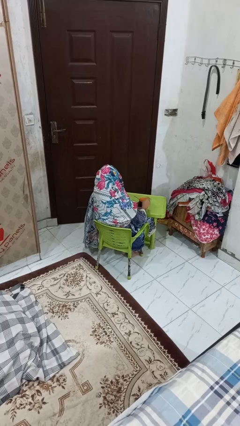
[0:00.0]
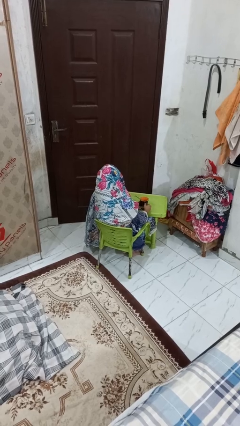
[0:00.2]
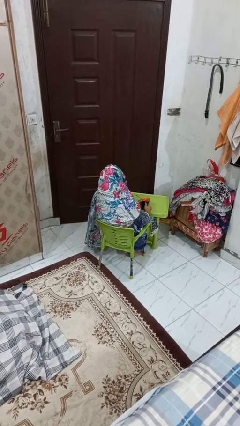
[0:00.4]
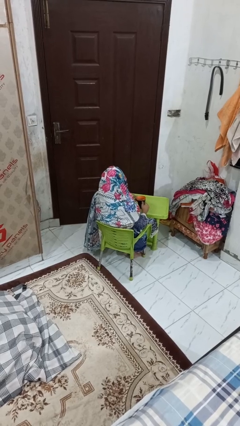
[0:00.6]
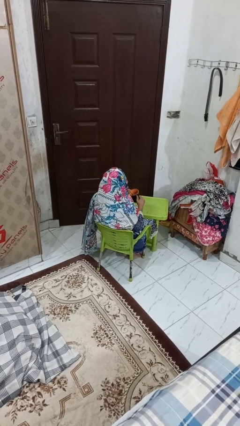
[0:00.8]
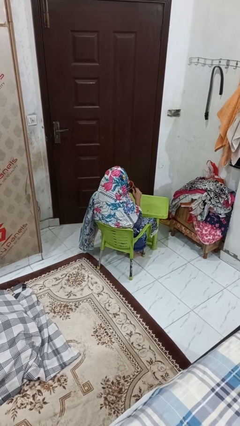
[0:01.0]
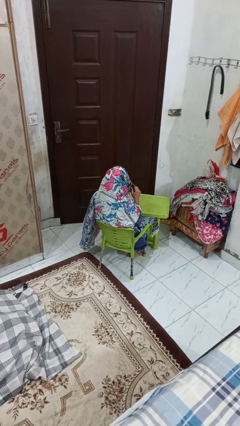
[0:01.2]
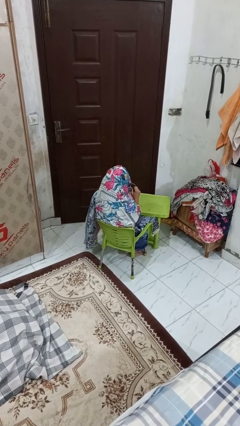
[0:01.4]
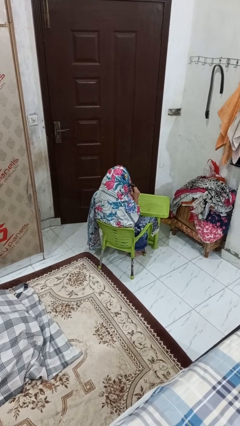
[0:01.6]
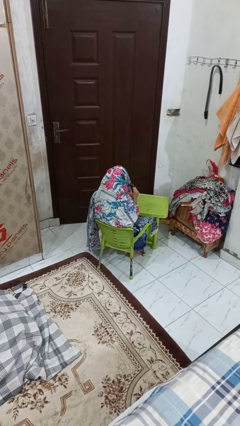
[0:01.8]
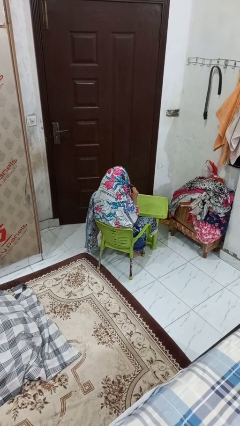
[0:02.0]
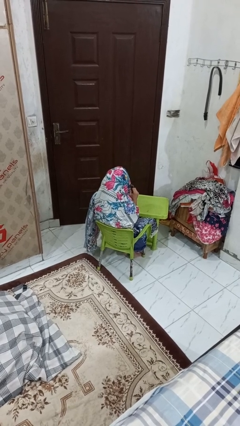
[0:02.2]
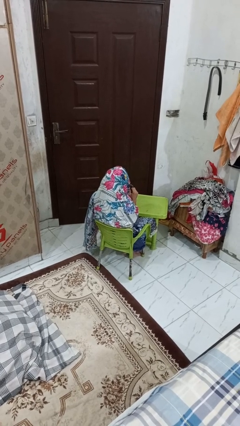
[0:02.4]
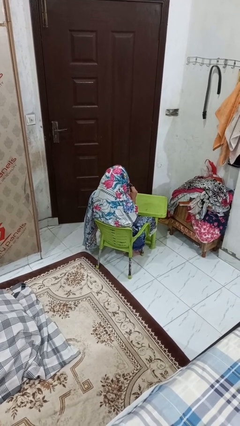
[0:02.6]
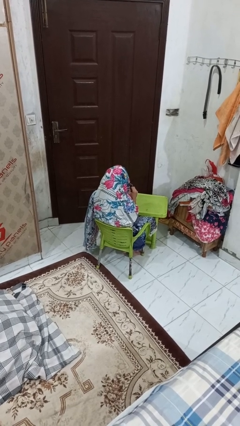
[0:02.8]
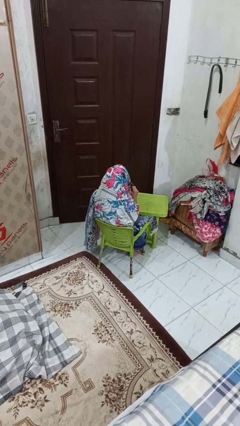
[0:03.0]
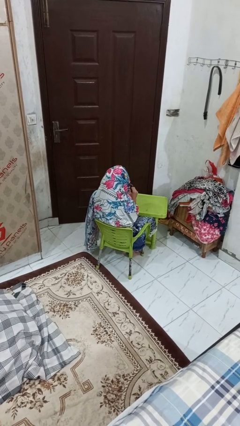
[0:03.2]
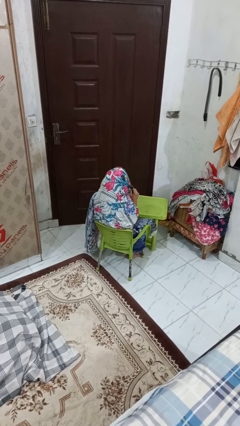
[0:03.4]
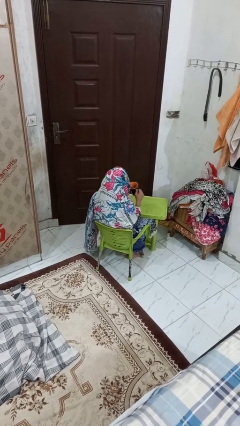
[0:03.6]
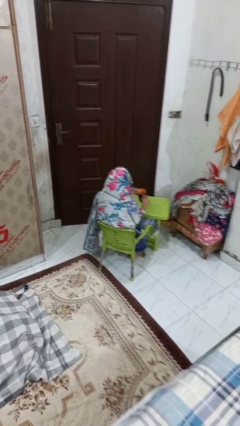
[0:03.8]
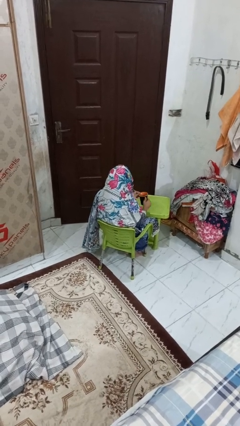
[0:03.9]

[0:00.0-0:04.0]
person drinks from mug

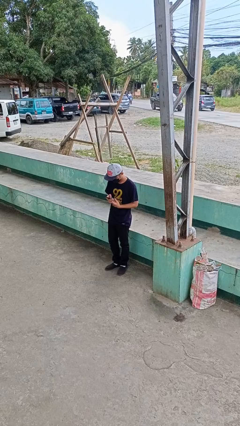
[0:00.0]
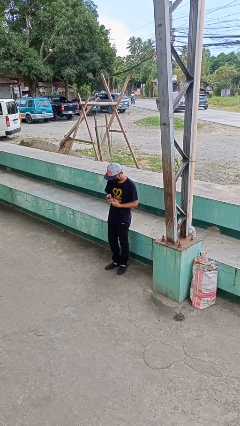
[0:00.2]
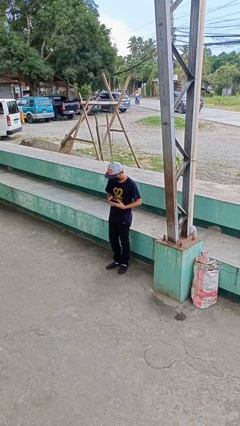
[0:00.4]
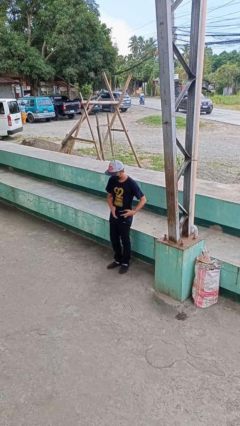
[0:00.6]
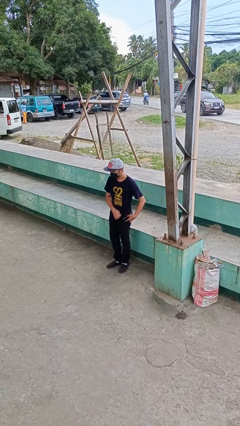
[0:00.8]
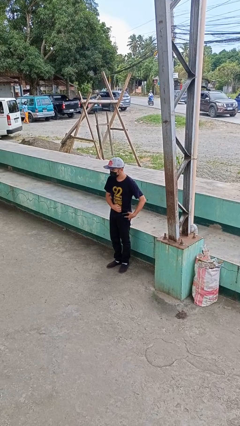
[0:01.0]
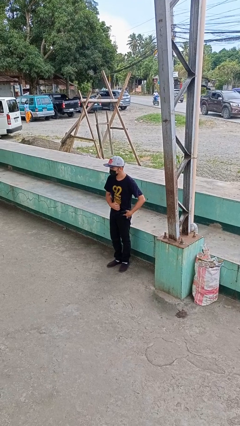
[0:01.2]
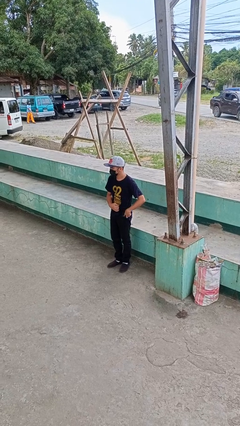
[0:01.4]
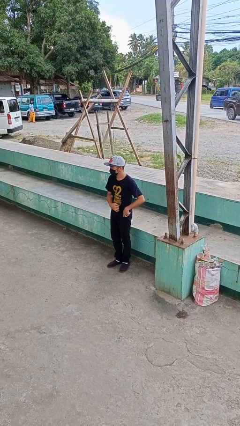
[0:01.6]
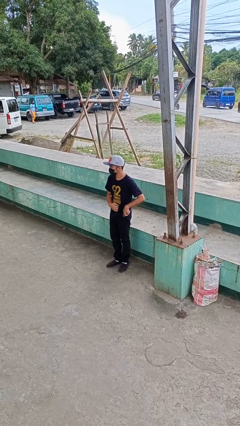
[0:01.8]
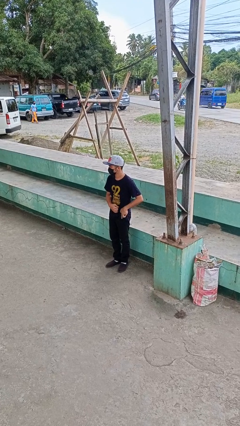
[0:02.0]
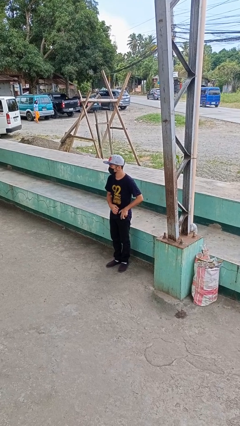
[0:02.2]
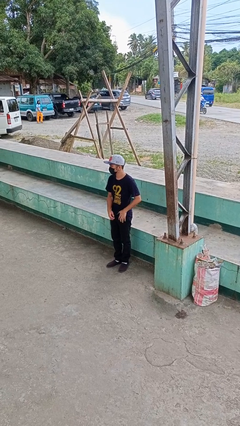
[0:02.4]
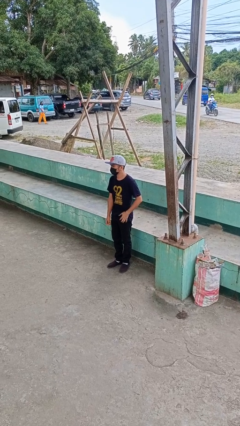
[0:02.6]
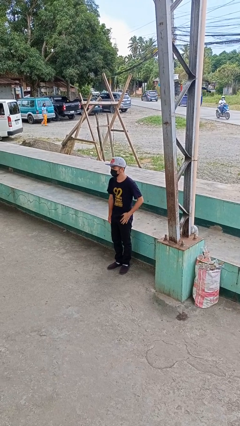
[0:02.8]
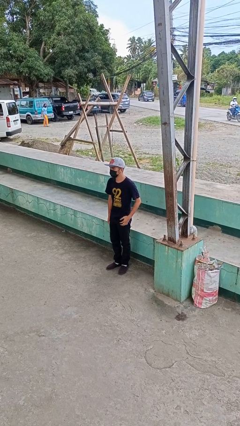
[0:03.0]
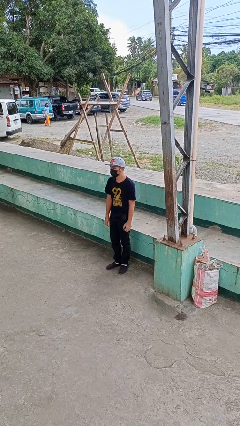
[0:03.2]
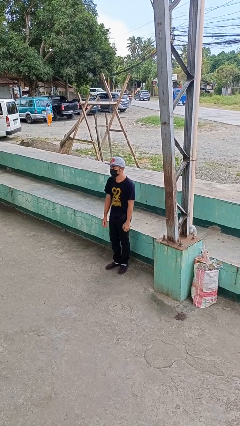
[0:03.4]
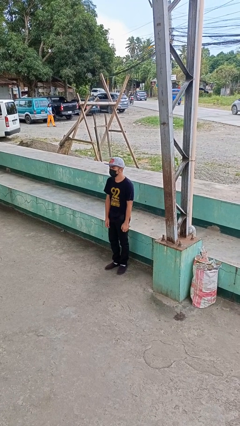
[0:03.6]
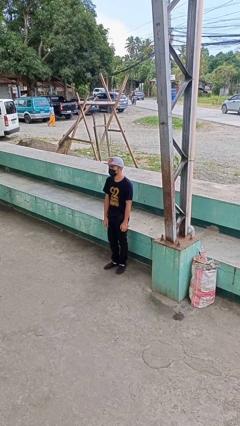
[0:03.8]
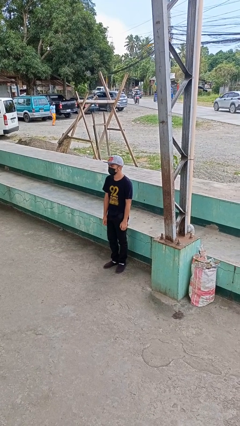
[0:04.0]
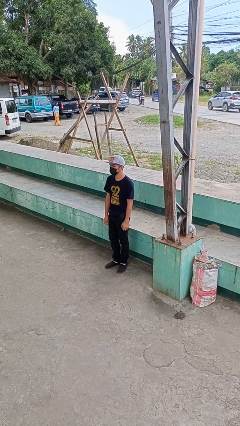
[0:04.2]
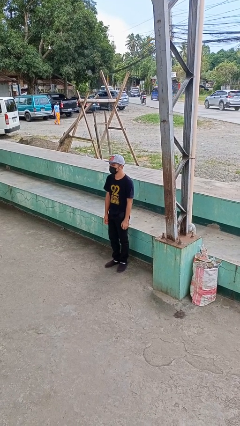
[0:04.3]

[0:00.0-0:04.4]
person puts phone into pocket

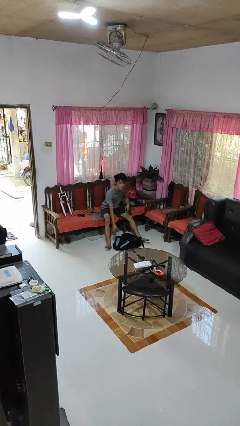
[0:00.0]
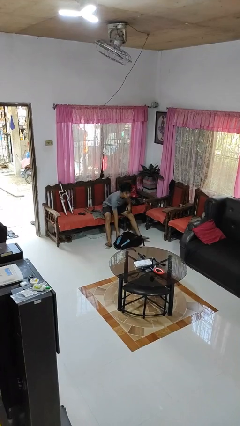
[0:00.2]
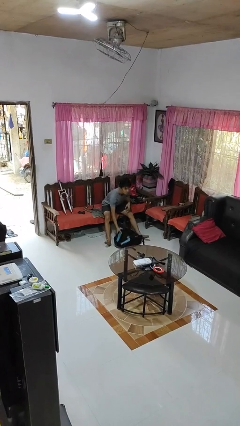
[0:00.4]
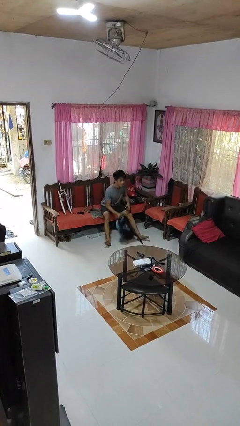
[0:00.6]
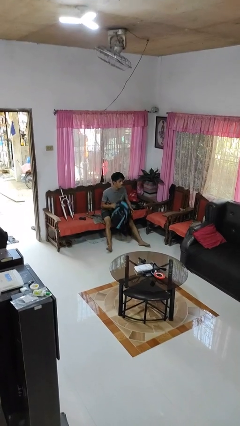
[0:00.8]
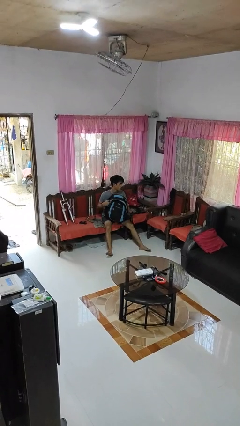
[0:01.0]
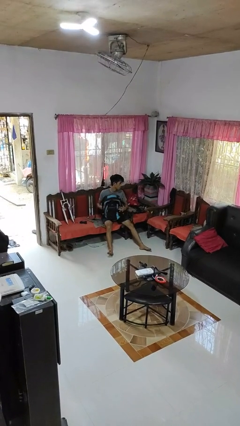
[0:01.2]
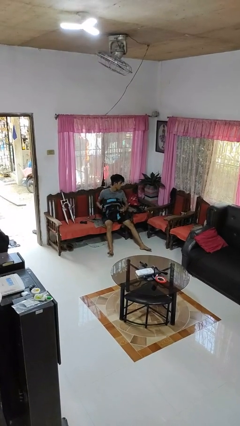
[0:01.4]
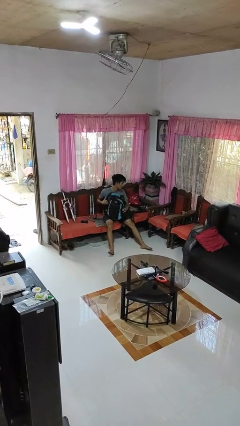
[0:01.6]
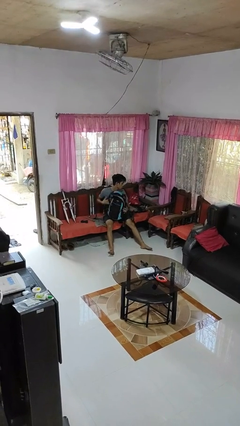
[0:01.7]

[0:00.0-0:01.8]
person picks up object from floor

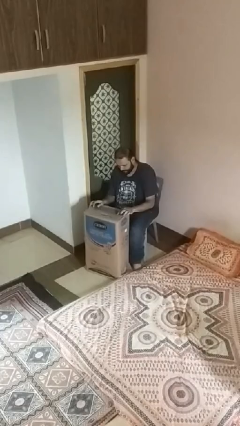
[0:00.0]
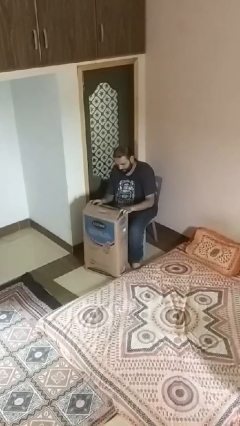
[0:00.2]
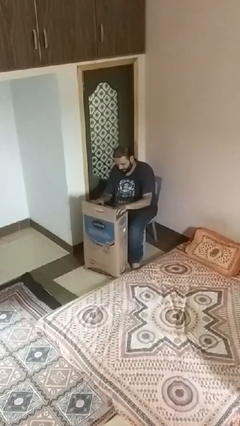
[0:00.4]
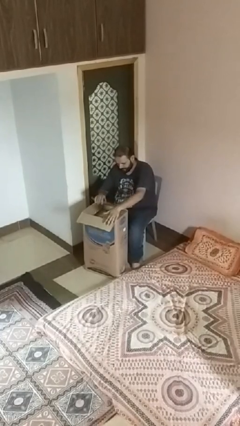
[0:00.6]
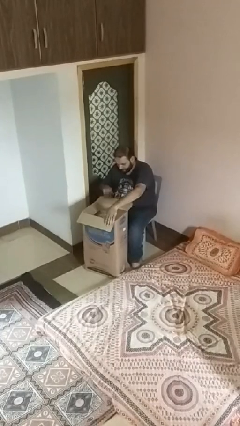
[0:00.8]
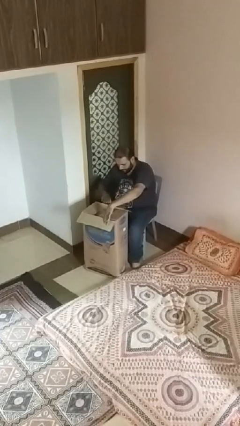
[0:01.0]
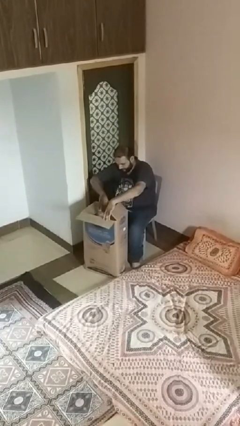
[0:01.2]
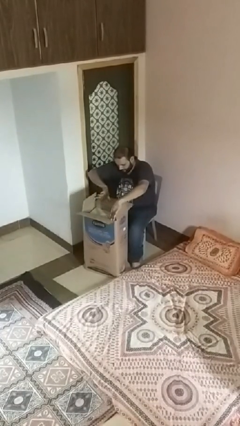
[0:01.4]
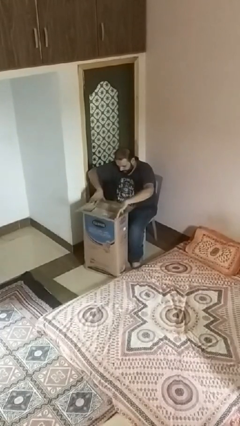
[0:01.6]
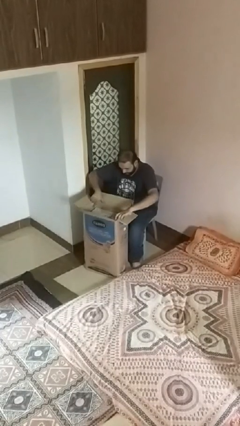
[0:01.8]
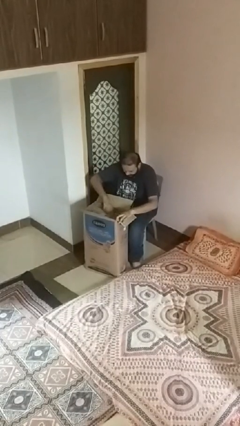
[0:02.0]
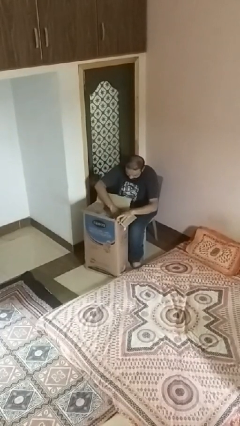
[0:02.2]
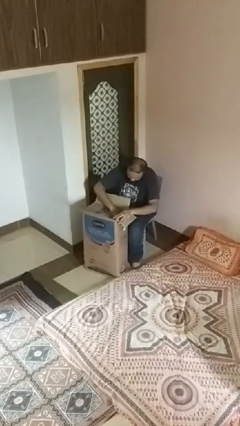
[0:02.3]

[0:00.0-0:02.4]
person searches in box

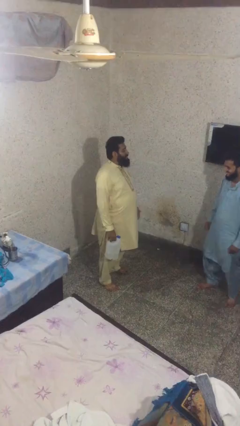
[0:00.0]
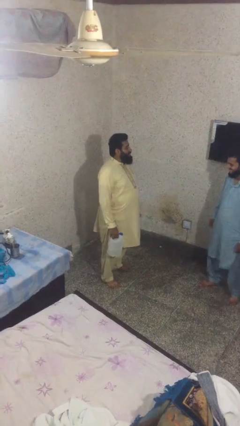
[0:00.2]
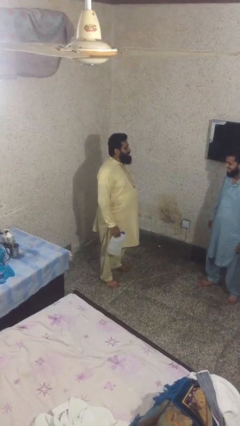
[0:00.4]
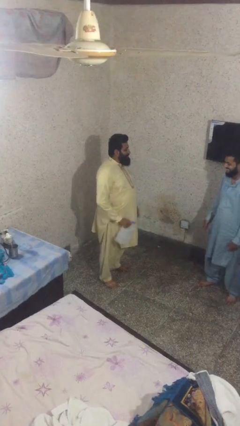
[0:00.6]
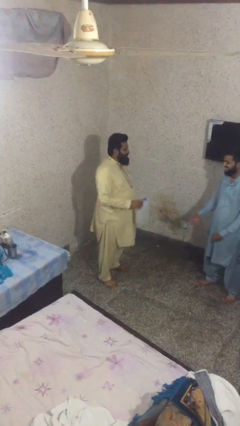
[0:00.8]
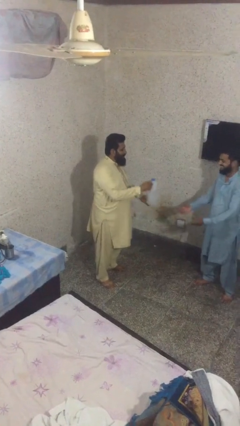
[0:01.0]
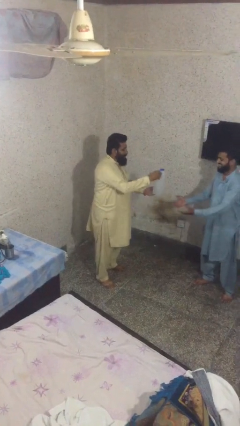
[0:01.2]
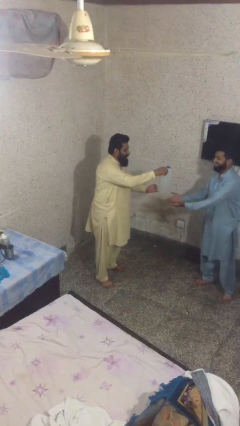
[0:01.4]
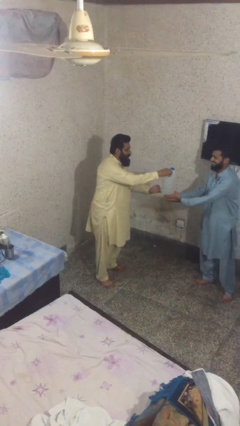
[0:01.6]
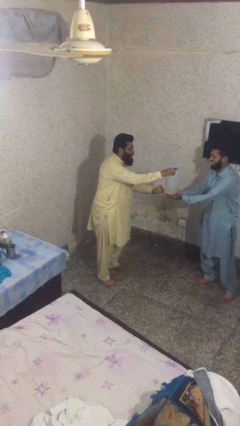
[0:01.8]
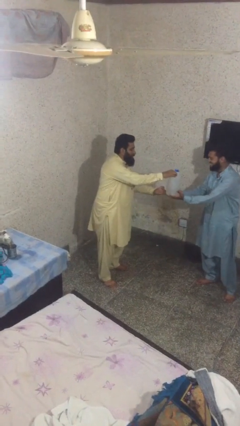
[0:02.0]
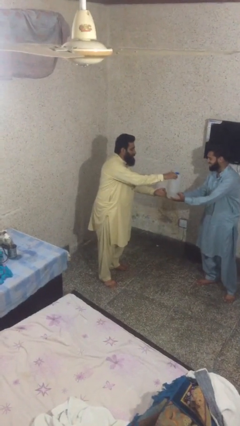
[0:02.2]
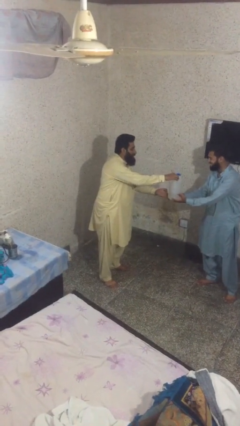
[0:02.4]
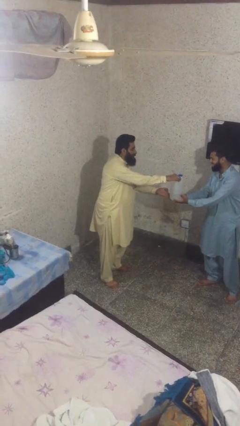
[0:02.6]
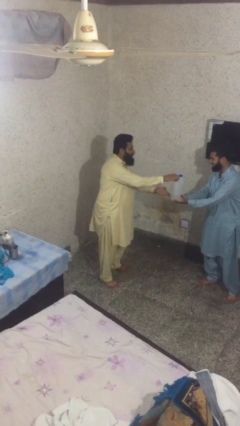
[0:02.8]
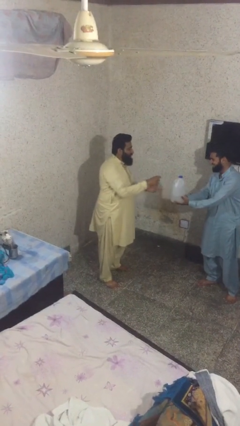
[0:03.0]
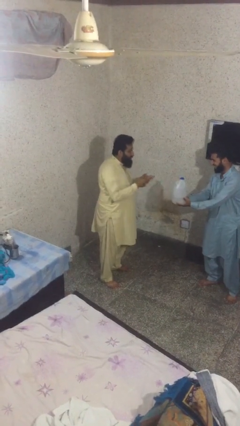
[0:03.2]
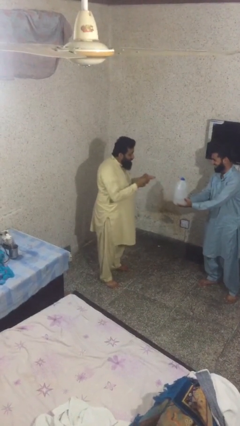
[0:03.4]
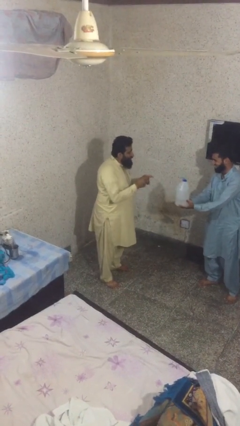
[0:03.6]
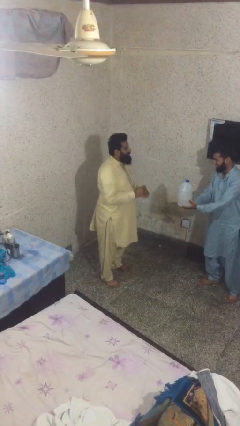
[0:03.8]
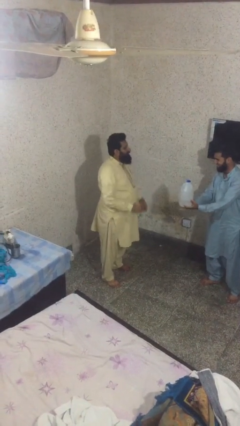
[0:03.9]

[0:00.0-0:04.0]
person transfers object to person

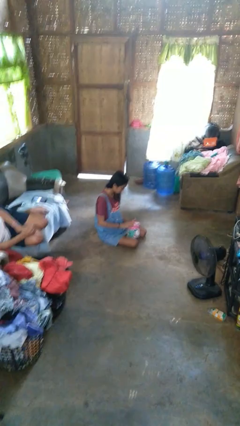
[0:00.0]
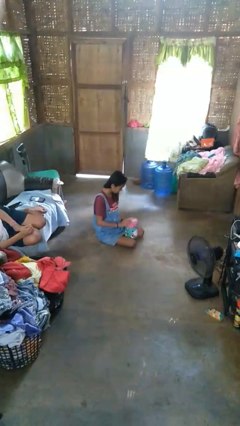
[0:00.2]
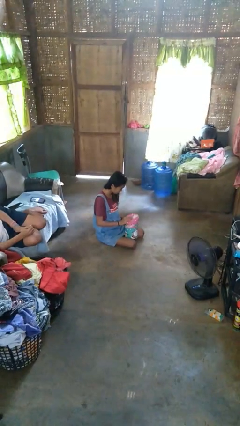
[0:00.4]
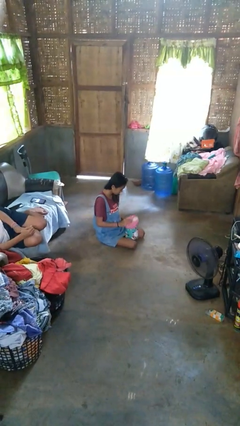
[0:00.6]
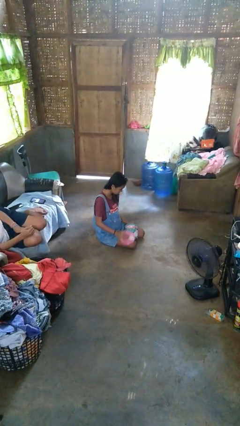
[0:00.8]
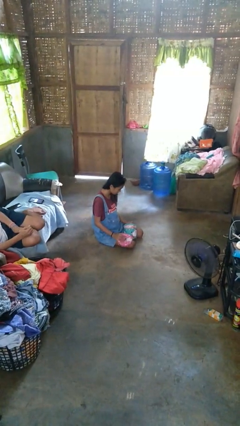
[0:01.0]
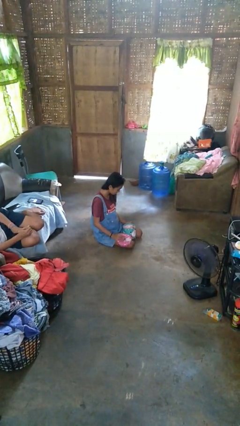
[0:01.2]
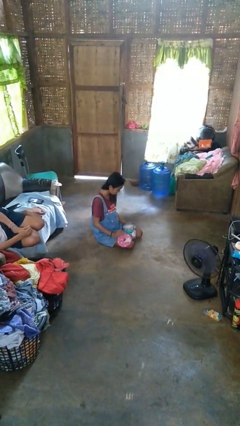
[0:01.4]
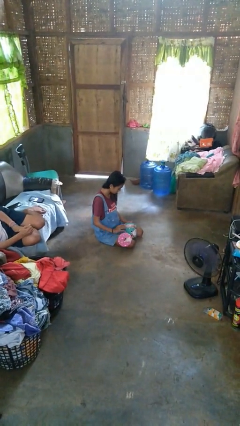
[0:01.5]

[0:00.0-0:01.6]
person opens jewelry box
